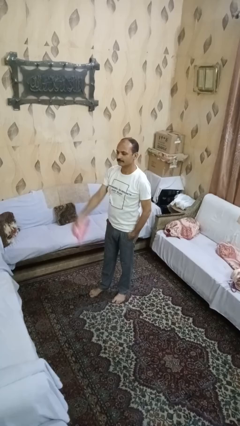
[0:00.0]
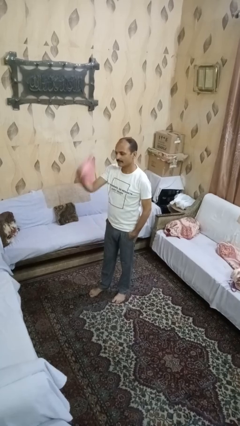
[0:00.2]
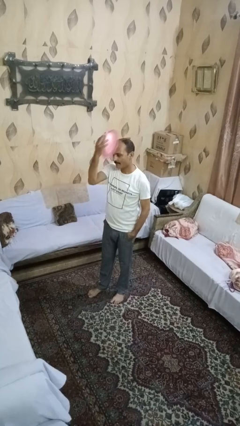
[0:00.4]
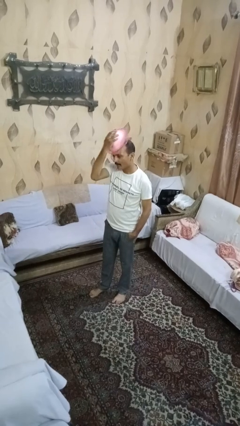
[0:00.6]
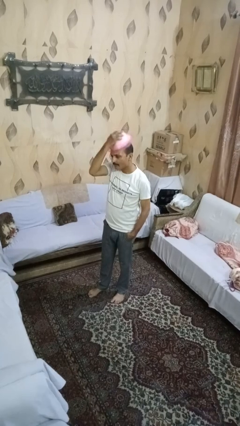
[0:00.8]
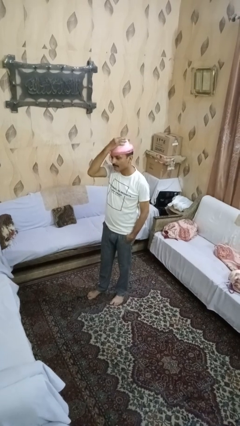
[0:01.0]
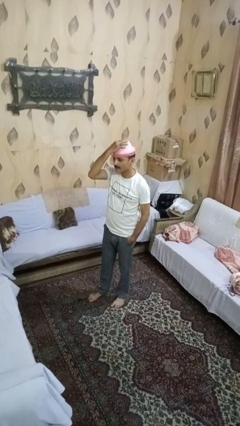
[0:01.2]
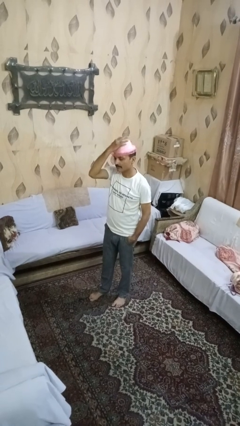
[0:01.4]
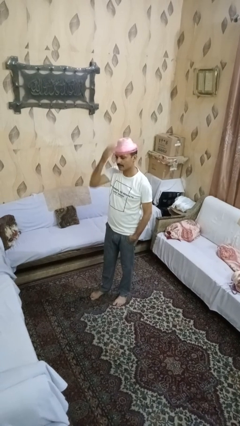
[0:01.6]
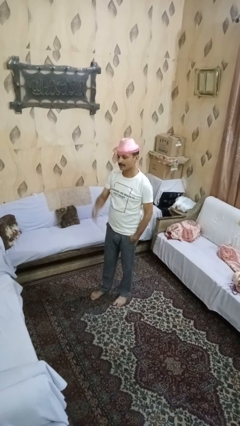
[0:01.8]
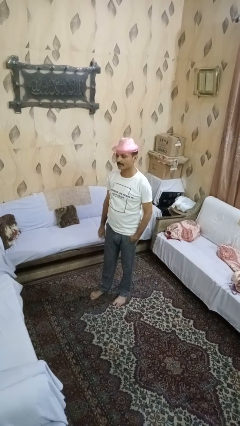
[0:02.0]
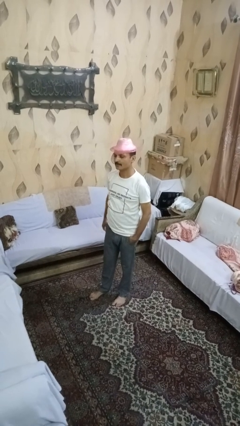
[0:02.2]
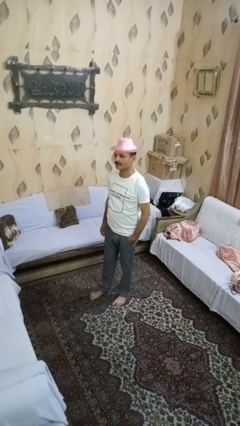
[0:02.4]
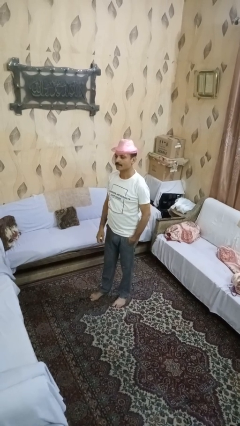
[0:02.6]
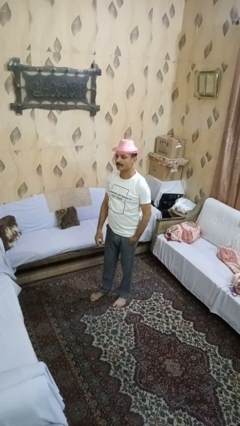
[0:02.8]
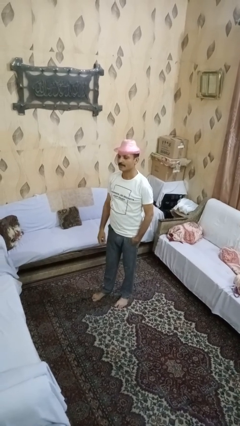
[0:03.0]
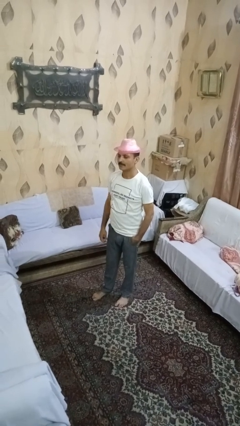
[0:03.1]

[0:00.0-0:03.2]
person puts on hat

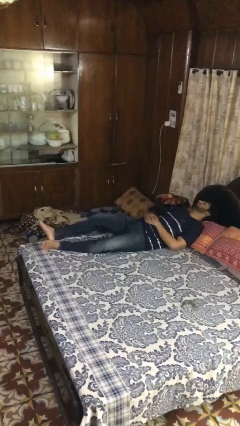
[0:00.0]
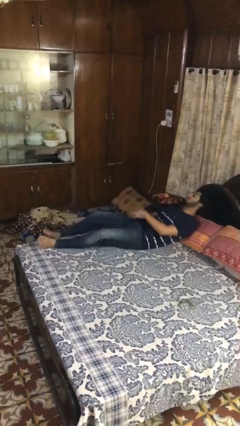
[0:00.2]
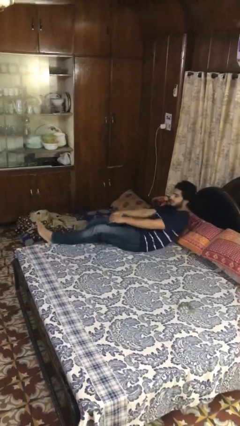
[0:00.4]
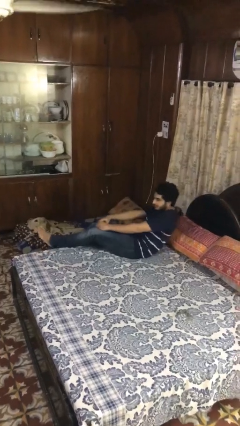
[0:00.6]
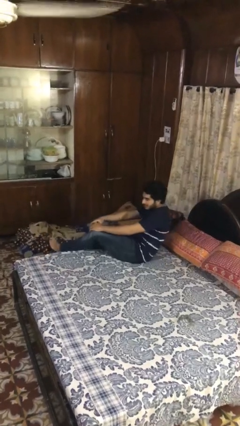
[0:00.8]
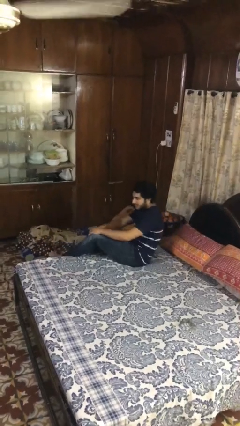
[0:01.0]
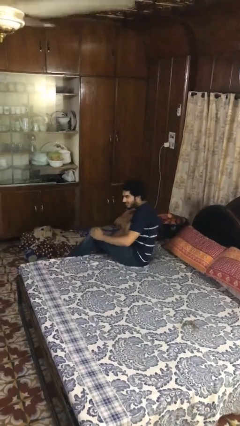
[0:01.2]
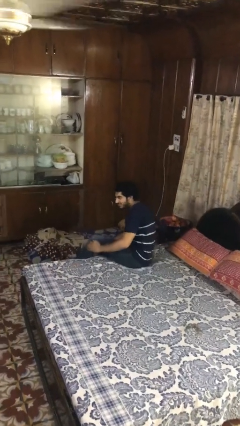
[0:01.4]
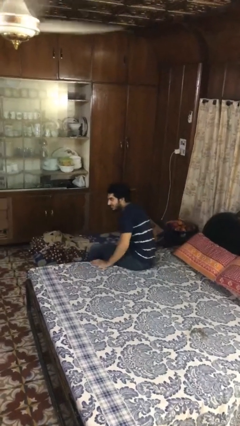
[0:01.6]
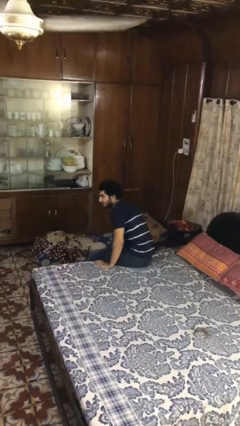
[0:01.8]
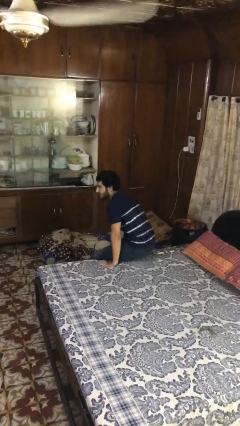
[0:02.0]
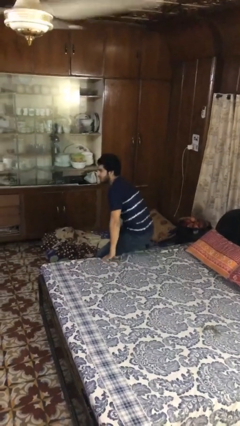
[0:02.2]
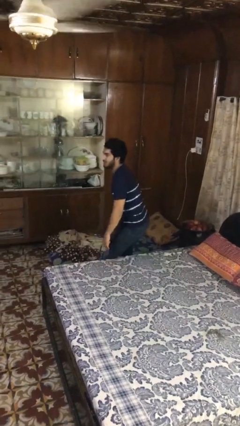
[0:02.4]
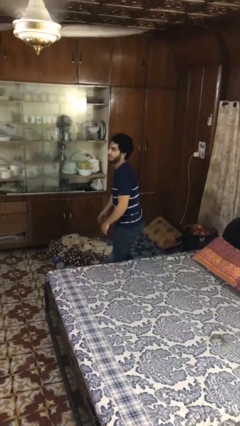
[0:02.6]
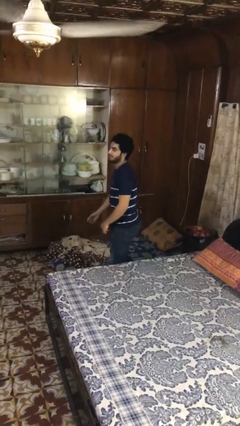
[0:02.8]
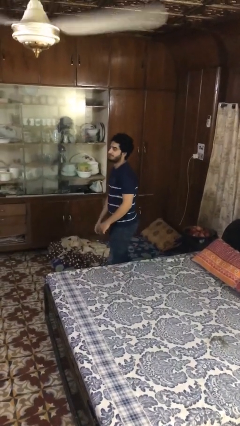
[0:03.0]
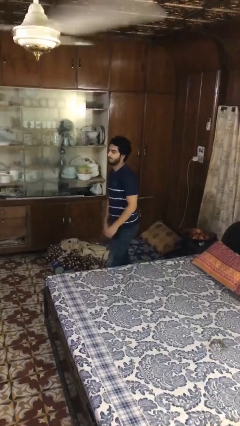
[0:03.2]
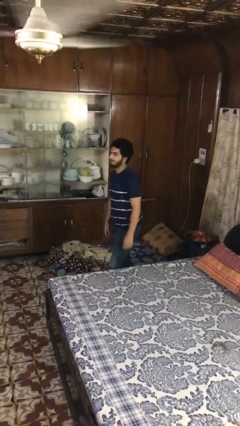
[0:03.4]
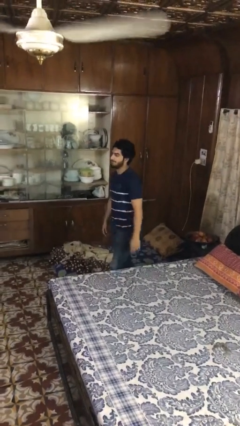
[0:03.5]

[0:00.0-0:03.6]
person stands up

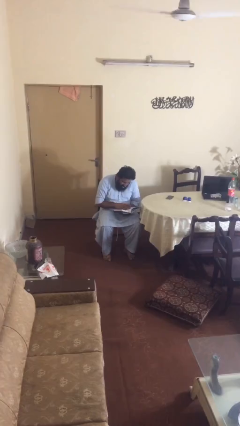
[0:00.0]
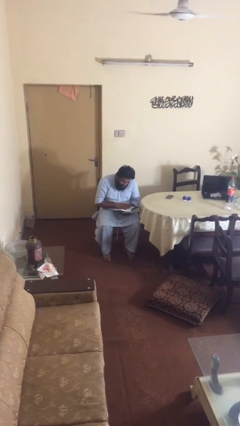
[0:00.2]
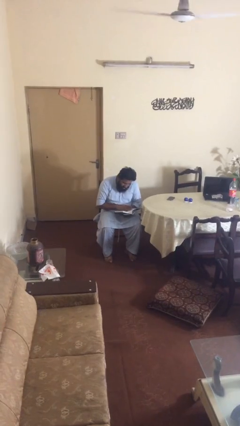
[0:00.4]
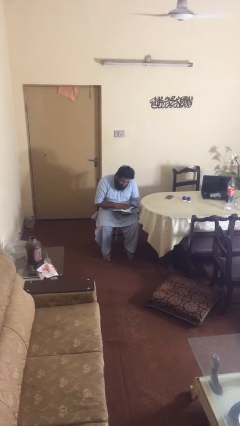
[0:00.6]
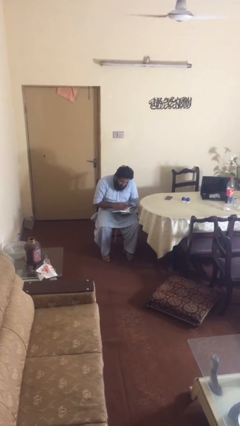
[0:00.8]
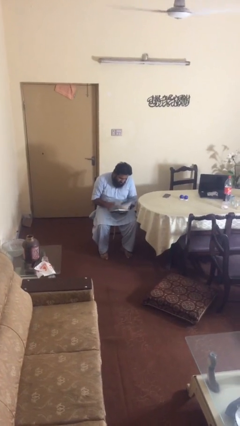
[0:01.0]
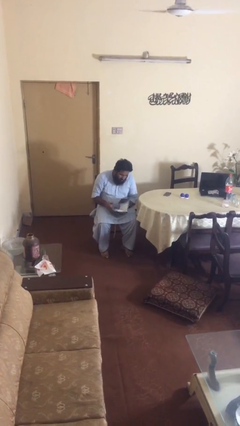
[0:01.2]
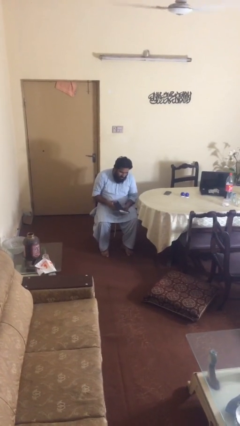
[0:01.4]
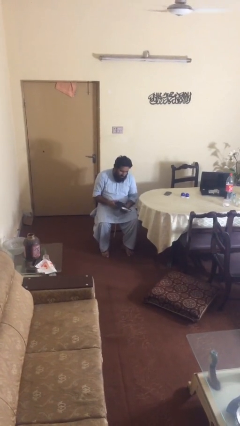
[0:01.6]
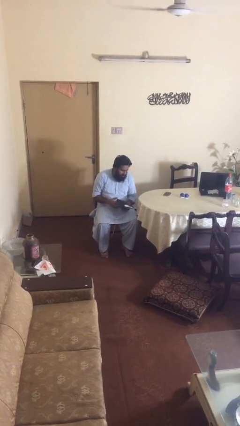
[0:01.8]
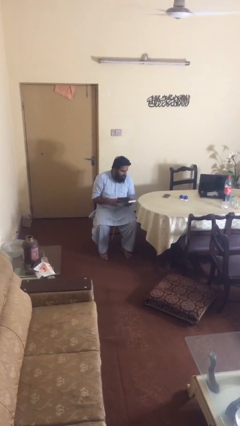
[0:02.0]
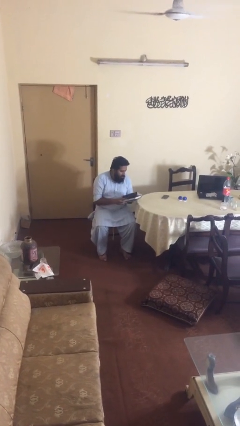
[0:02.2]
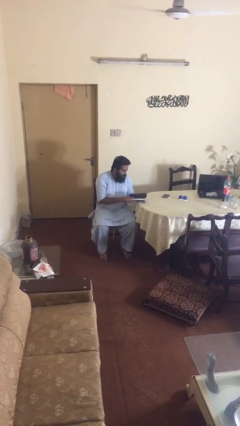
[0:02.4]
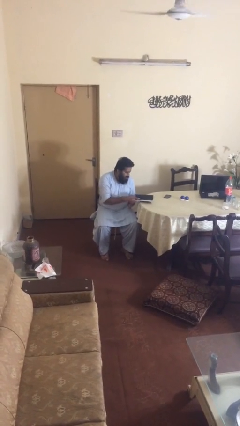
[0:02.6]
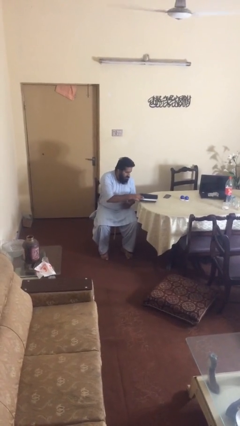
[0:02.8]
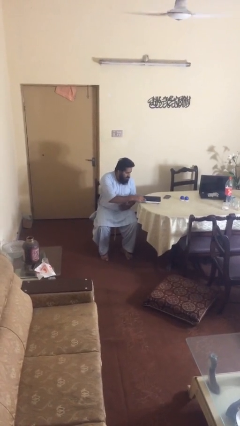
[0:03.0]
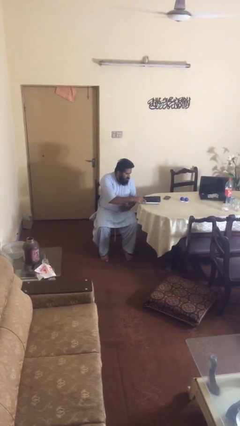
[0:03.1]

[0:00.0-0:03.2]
person puts down object on table

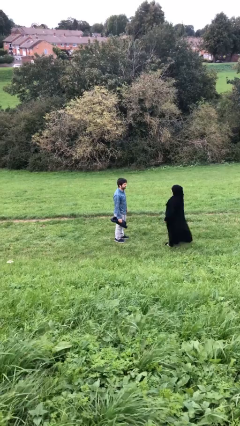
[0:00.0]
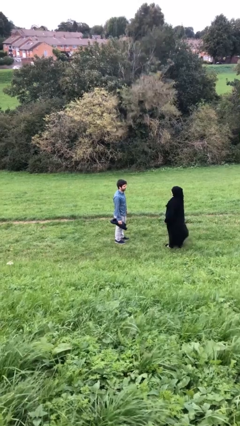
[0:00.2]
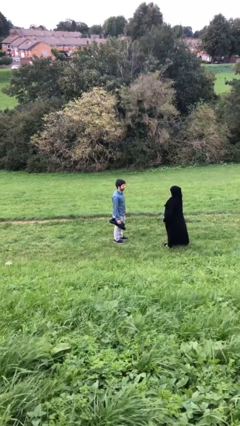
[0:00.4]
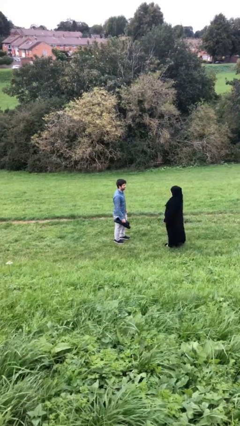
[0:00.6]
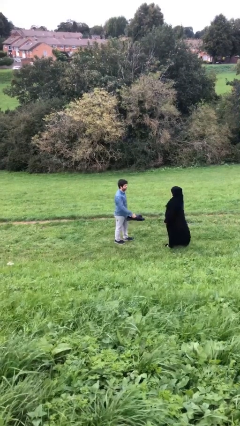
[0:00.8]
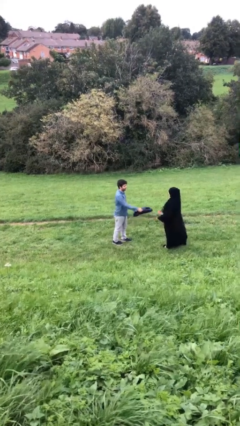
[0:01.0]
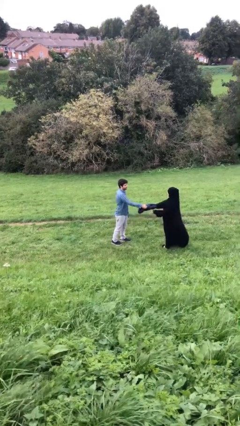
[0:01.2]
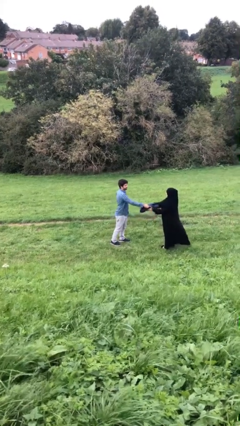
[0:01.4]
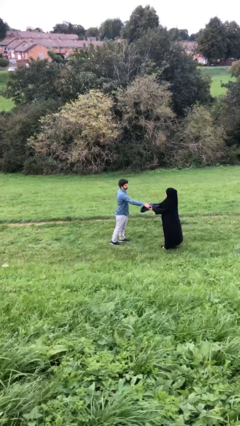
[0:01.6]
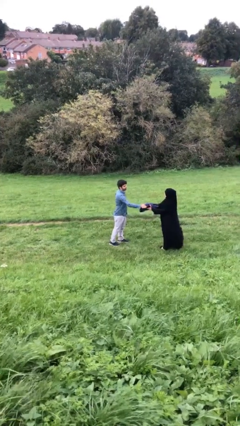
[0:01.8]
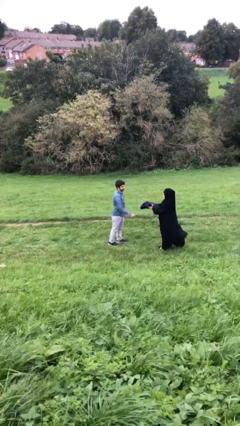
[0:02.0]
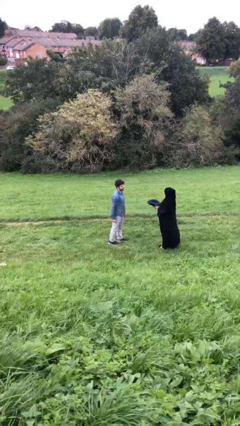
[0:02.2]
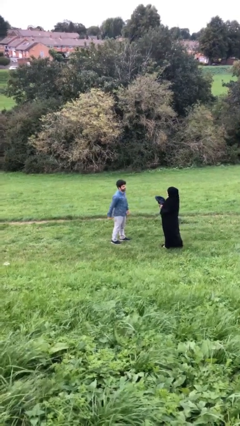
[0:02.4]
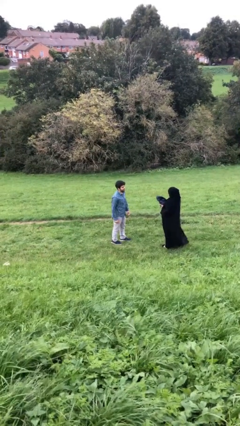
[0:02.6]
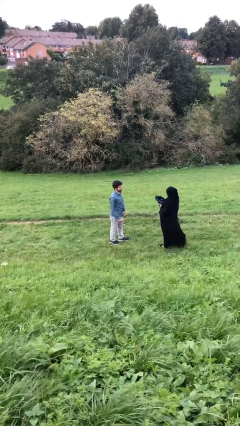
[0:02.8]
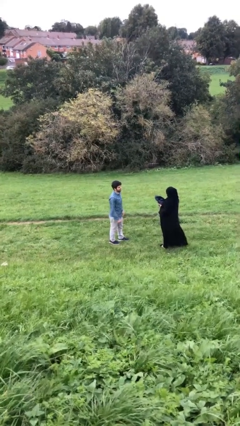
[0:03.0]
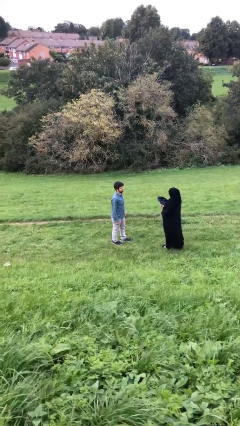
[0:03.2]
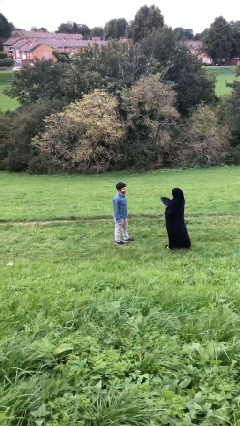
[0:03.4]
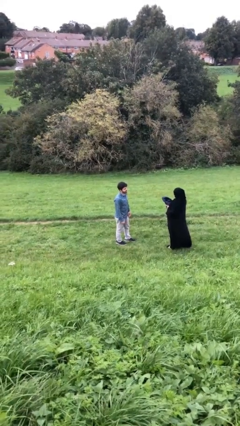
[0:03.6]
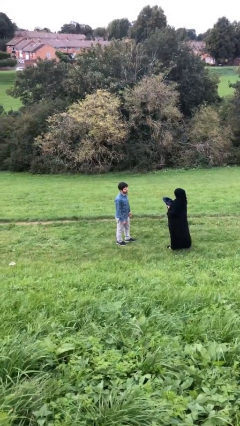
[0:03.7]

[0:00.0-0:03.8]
person transfers object to person

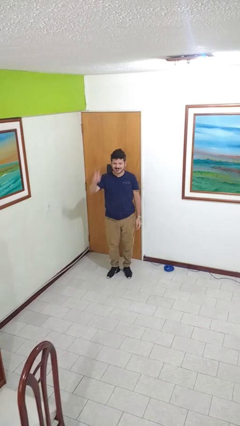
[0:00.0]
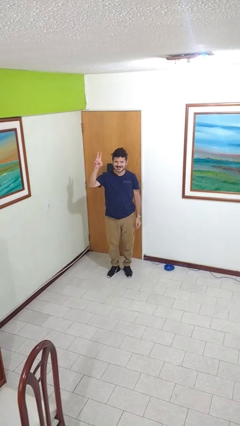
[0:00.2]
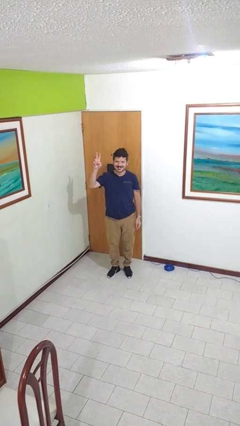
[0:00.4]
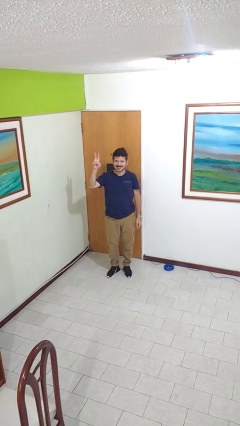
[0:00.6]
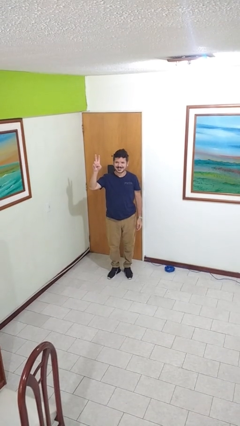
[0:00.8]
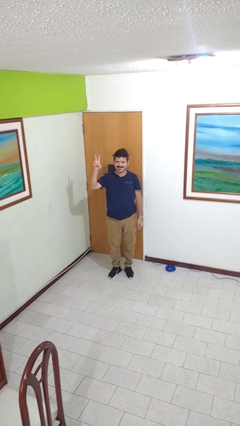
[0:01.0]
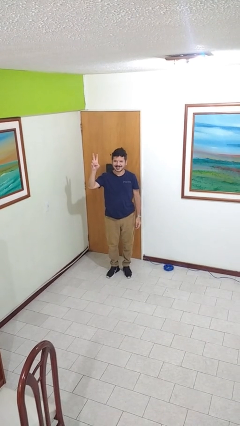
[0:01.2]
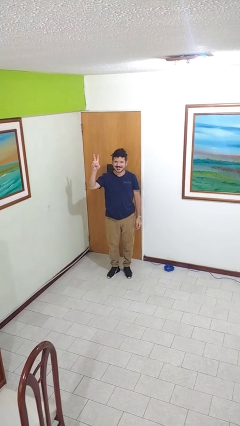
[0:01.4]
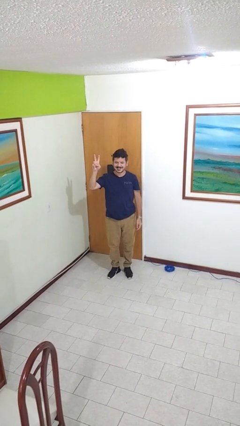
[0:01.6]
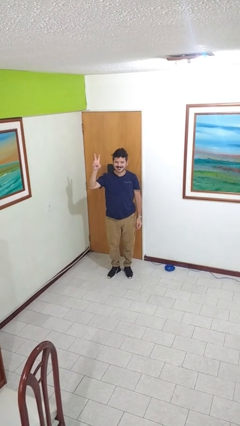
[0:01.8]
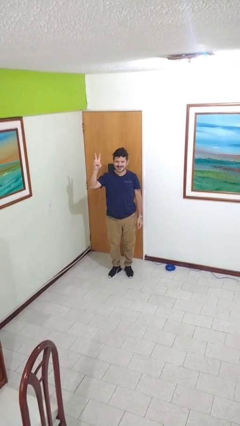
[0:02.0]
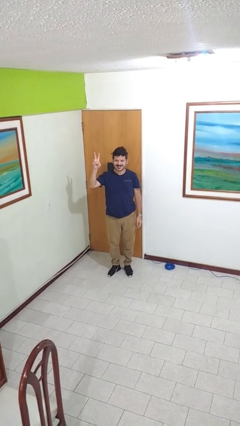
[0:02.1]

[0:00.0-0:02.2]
person gestures peace

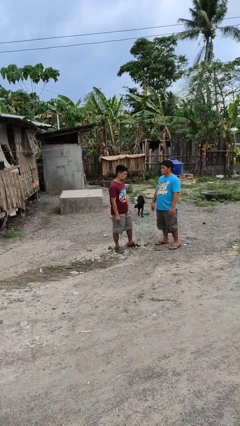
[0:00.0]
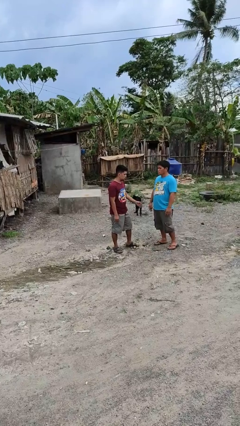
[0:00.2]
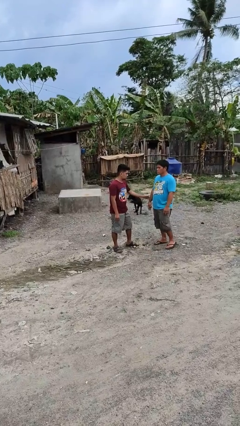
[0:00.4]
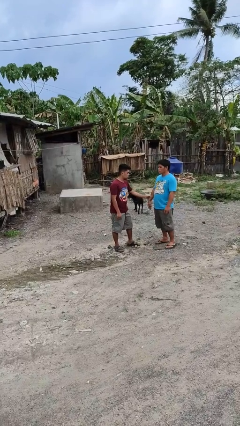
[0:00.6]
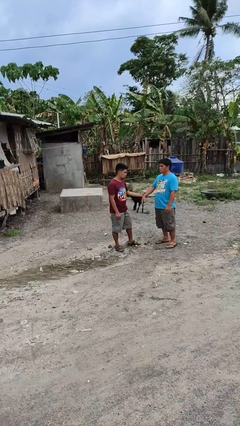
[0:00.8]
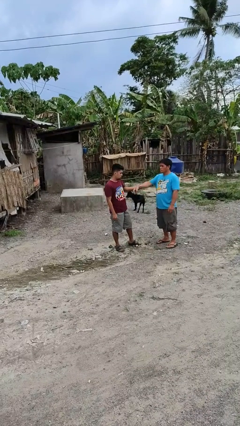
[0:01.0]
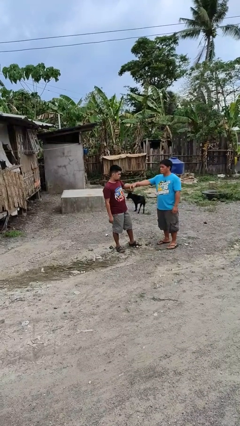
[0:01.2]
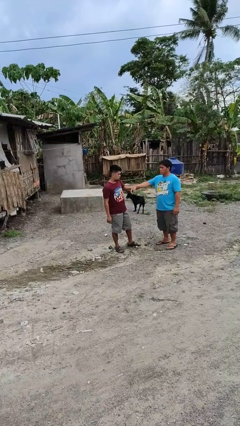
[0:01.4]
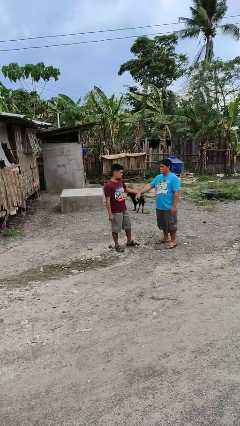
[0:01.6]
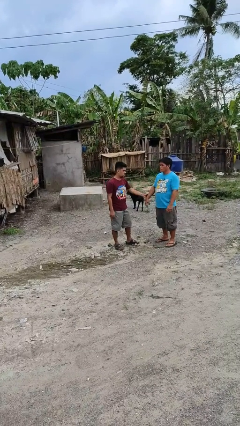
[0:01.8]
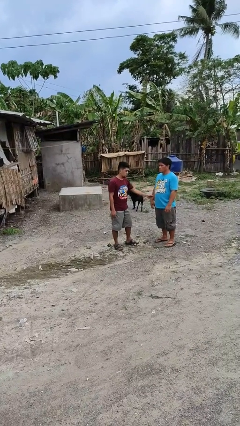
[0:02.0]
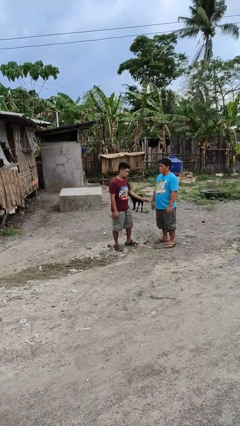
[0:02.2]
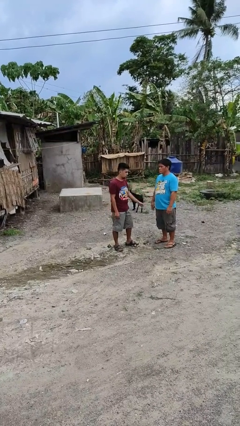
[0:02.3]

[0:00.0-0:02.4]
person grabs person by forearm
